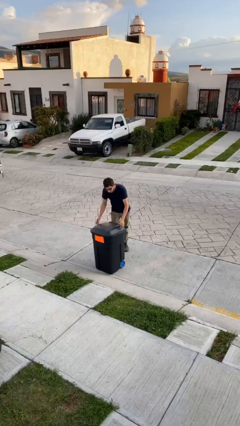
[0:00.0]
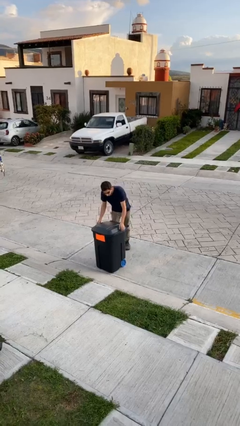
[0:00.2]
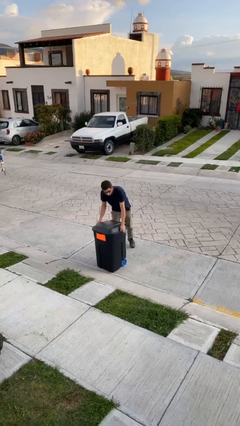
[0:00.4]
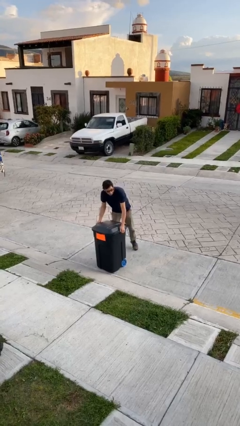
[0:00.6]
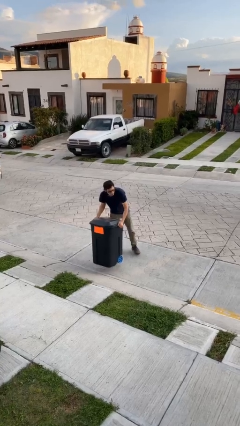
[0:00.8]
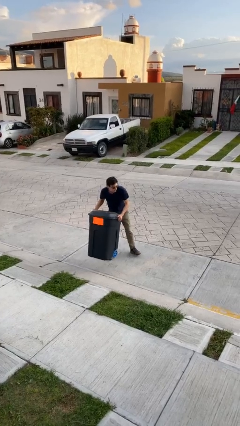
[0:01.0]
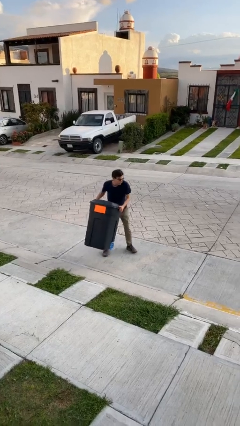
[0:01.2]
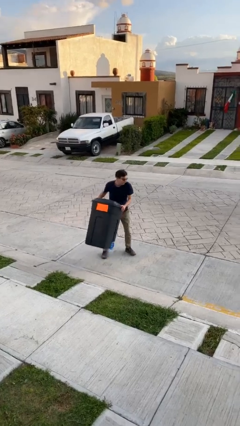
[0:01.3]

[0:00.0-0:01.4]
person picks up object from floor

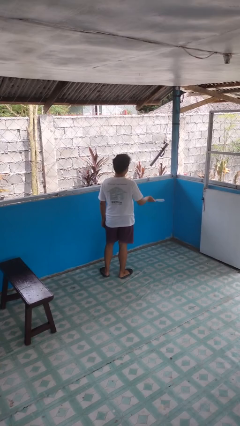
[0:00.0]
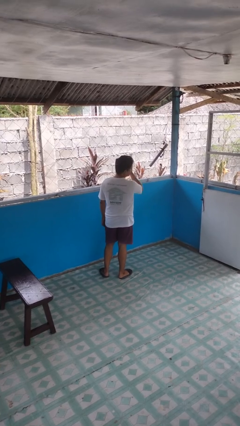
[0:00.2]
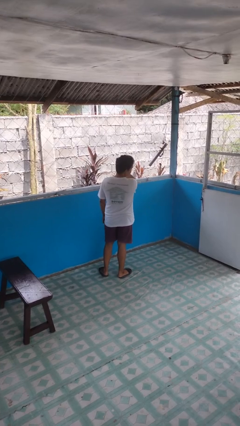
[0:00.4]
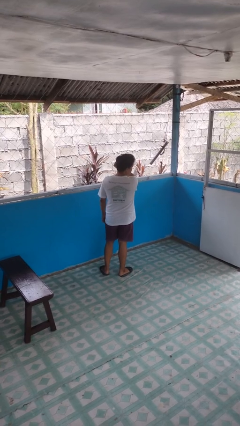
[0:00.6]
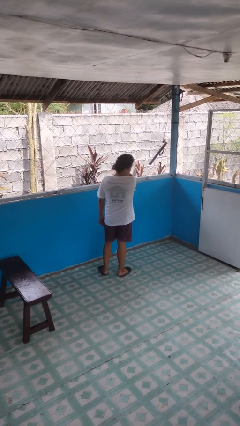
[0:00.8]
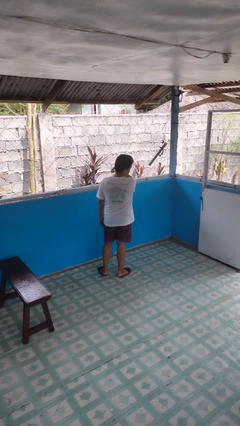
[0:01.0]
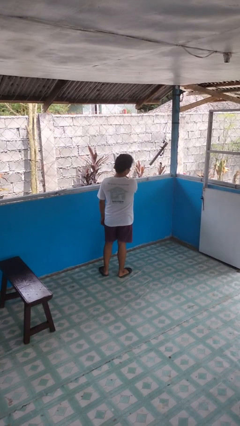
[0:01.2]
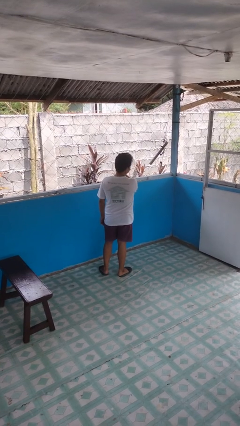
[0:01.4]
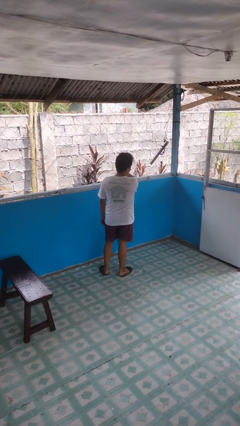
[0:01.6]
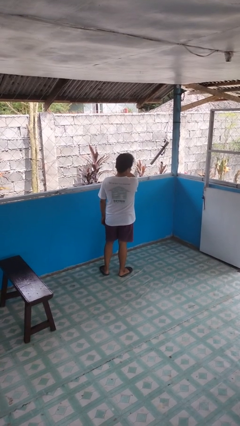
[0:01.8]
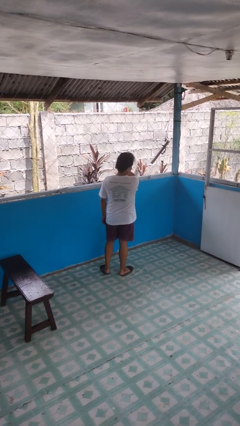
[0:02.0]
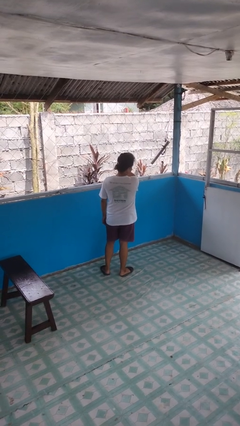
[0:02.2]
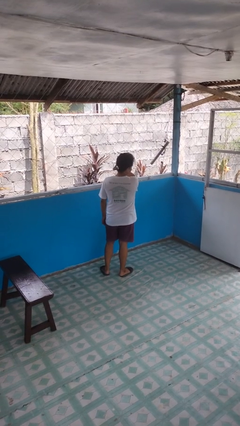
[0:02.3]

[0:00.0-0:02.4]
person brushes hair

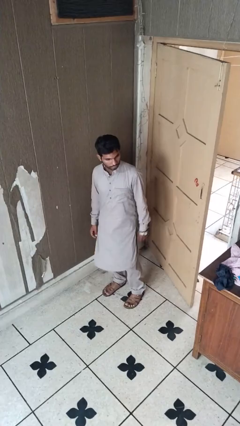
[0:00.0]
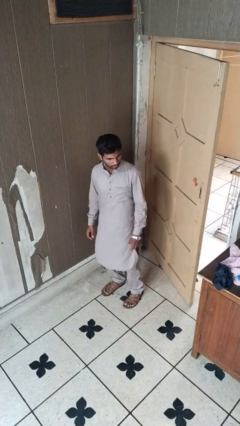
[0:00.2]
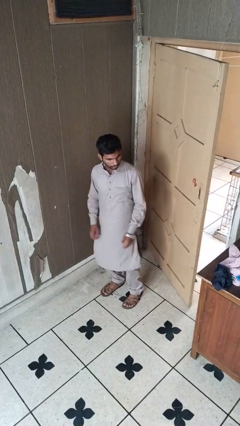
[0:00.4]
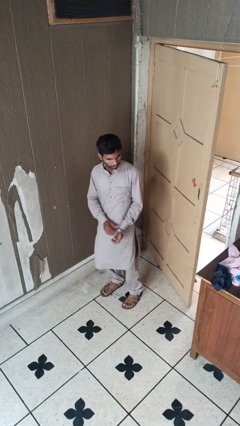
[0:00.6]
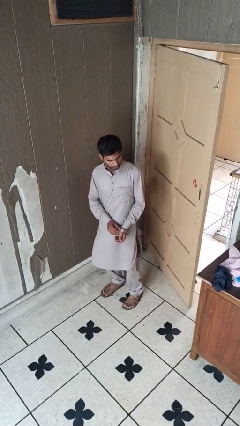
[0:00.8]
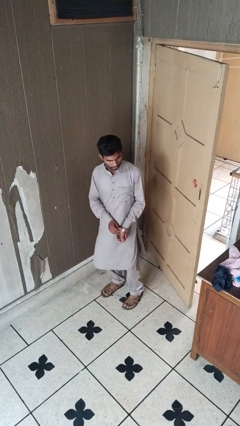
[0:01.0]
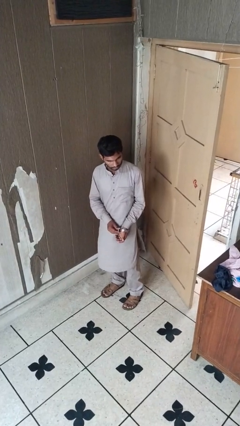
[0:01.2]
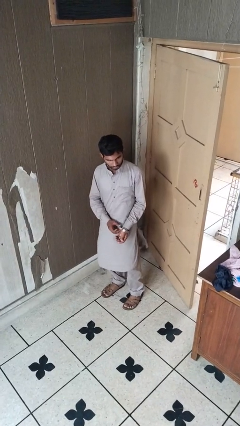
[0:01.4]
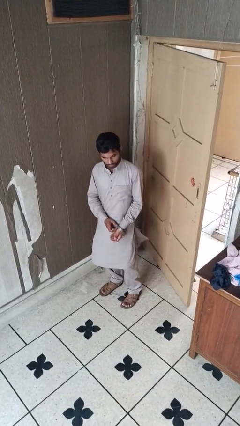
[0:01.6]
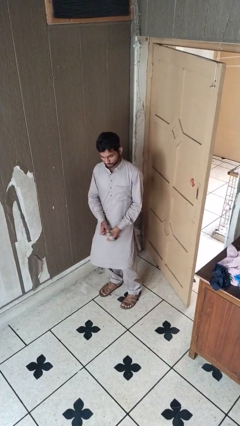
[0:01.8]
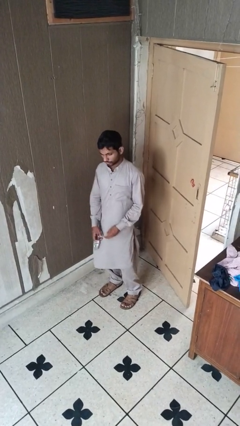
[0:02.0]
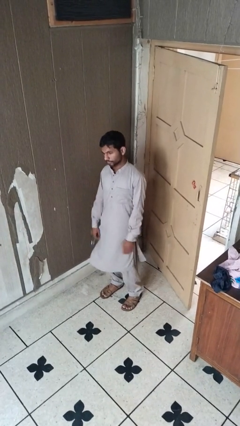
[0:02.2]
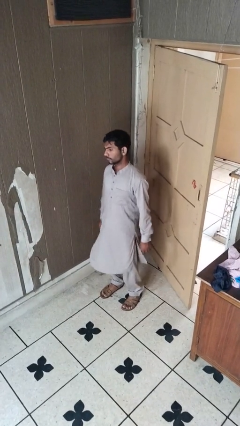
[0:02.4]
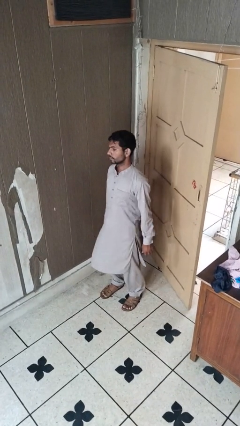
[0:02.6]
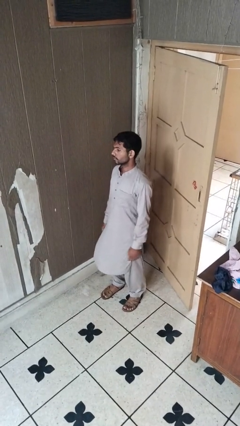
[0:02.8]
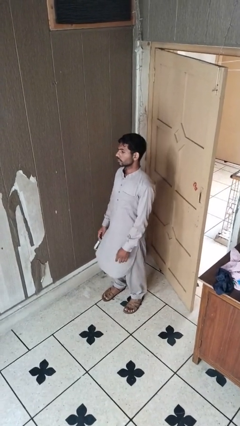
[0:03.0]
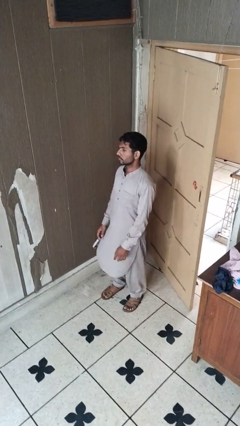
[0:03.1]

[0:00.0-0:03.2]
person takes off wristwatch

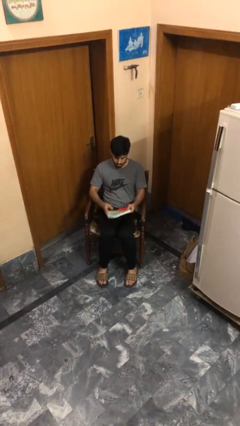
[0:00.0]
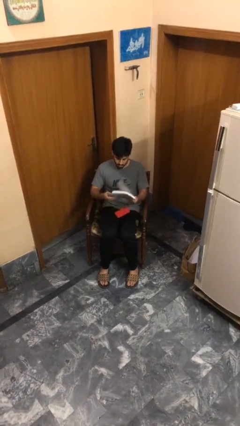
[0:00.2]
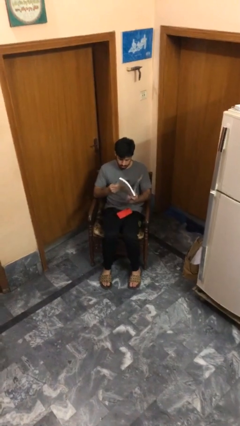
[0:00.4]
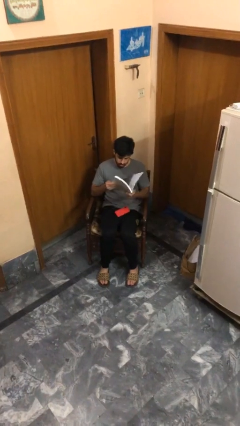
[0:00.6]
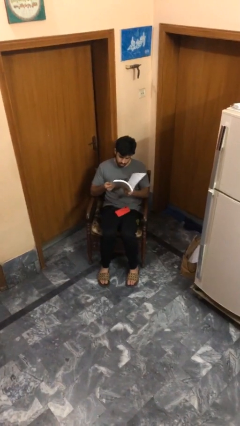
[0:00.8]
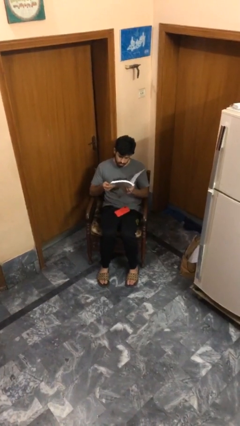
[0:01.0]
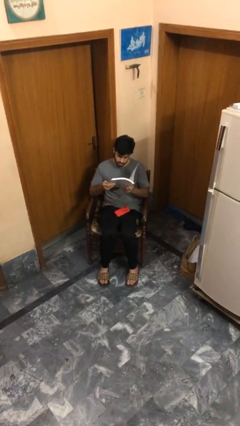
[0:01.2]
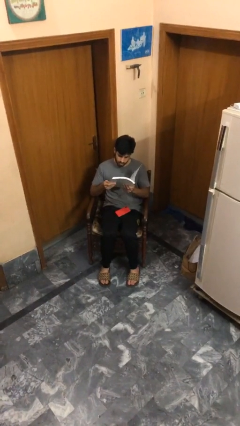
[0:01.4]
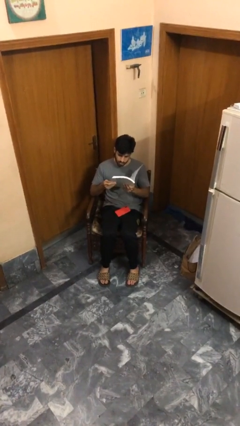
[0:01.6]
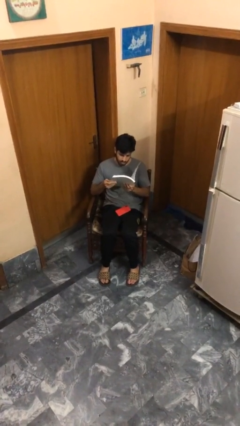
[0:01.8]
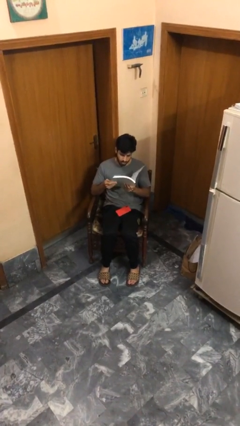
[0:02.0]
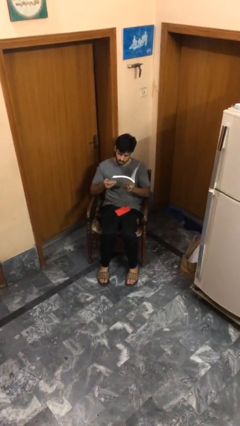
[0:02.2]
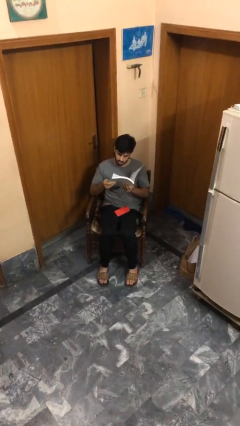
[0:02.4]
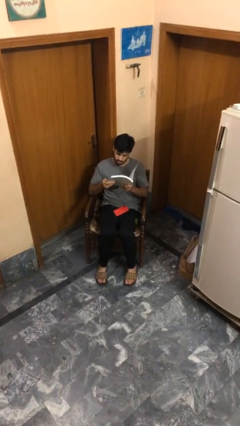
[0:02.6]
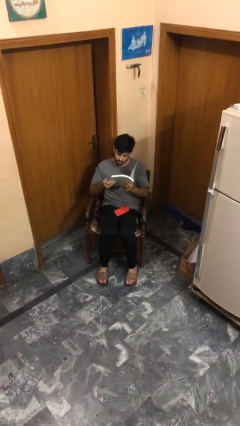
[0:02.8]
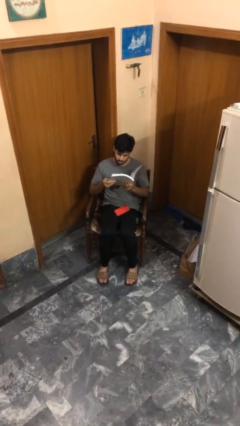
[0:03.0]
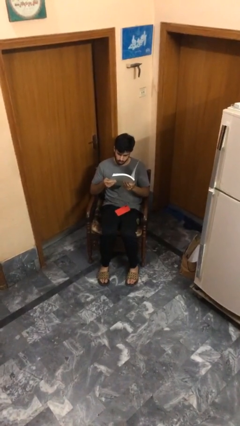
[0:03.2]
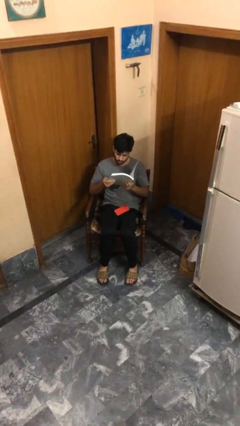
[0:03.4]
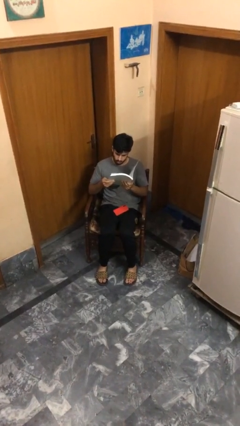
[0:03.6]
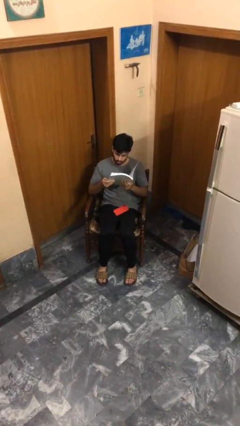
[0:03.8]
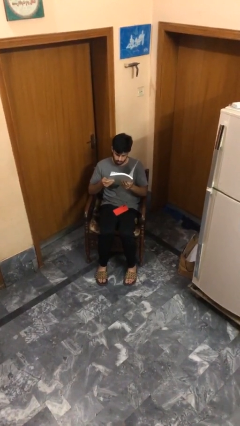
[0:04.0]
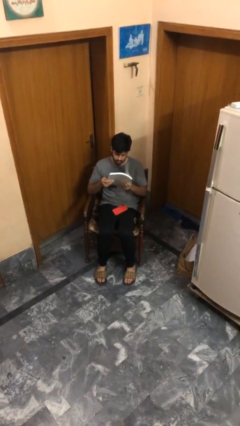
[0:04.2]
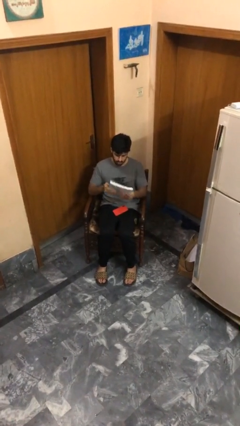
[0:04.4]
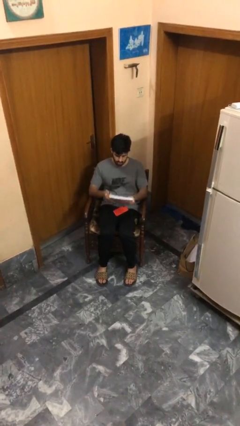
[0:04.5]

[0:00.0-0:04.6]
person reads book

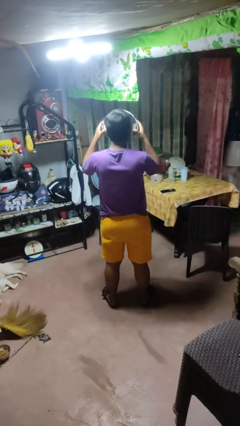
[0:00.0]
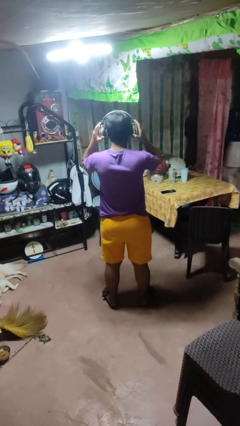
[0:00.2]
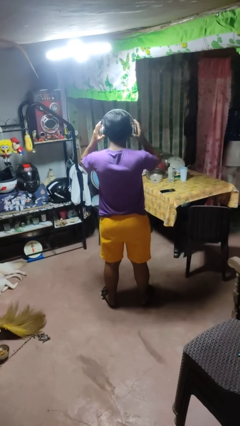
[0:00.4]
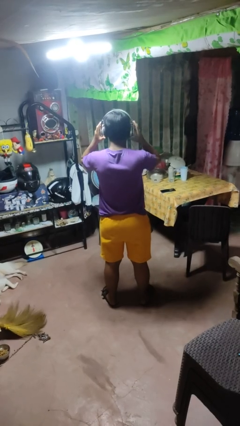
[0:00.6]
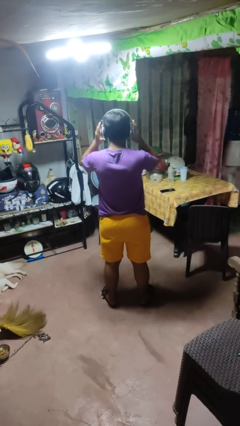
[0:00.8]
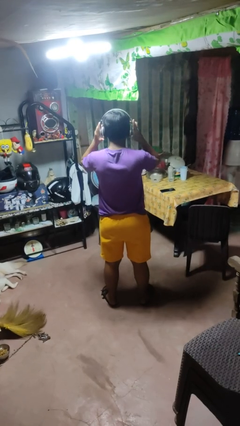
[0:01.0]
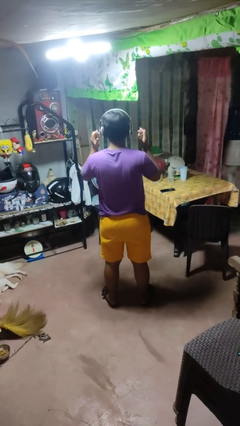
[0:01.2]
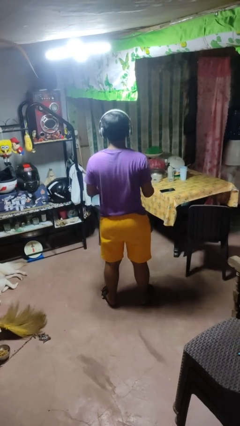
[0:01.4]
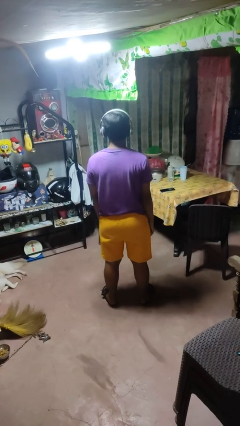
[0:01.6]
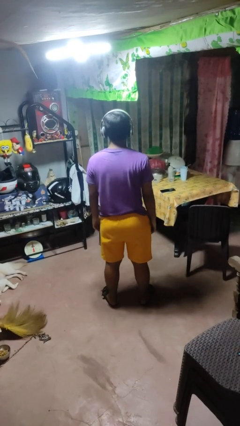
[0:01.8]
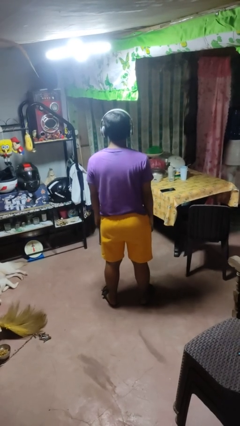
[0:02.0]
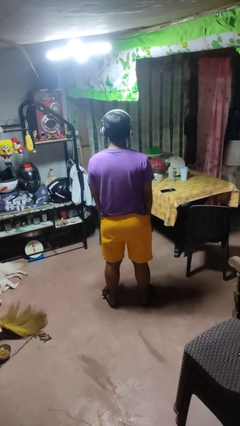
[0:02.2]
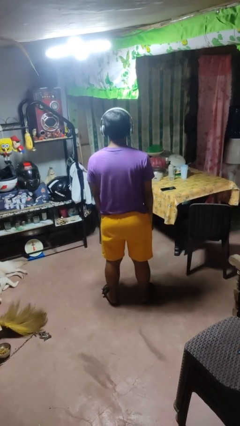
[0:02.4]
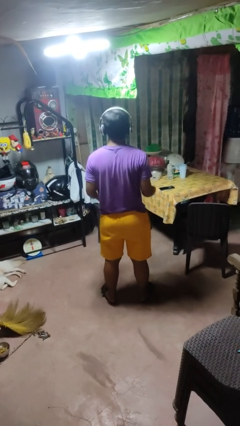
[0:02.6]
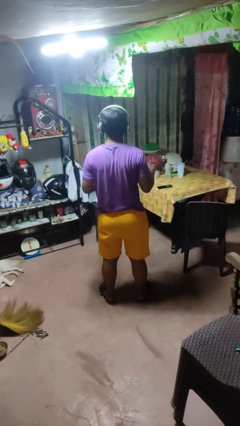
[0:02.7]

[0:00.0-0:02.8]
person puts on headphones

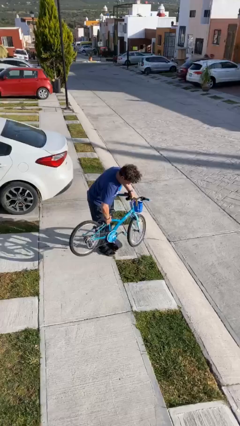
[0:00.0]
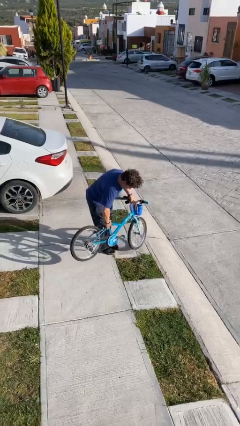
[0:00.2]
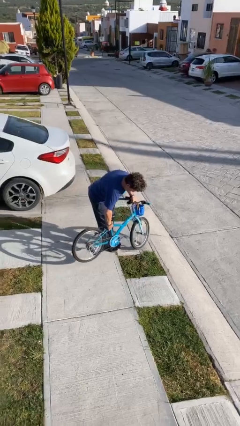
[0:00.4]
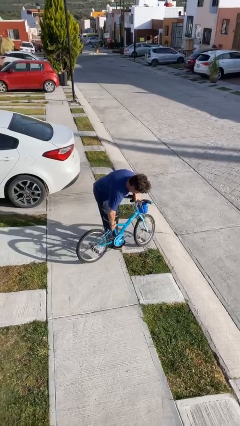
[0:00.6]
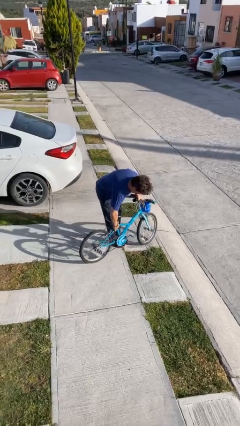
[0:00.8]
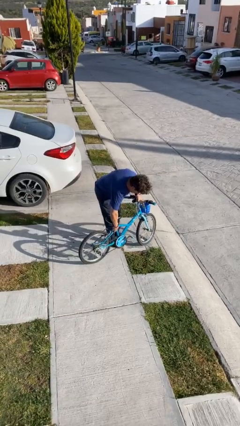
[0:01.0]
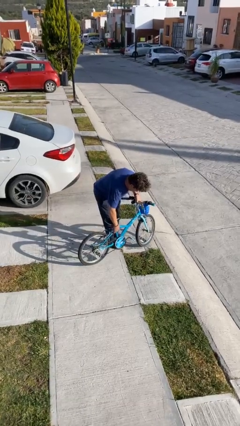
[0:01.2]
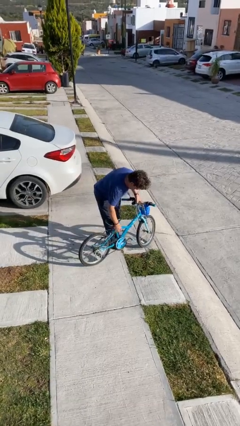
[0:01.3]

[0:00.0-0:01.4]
person puts down object on floor

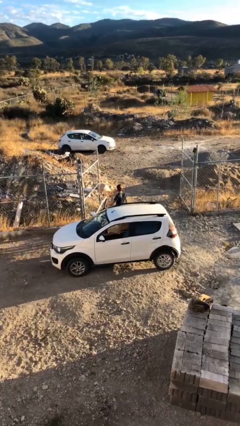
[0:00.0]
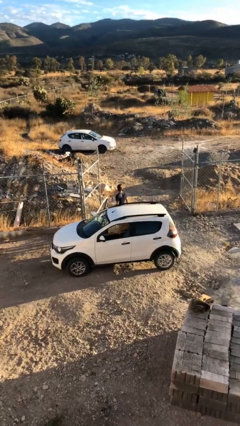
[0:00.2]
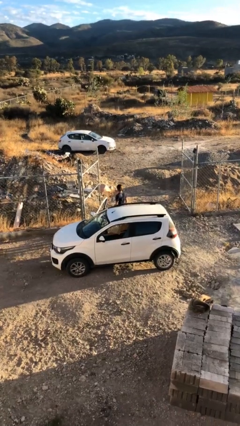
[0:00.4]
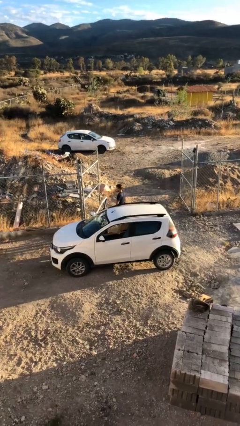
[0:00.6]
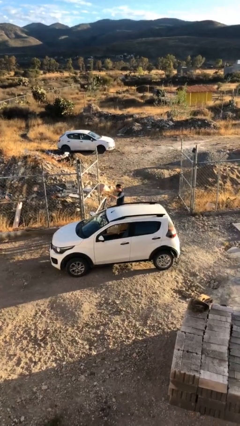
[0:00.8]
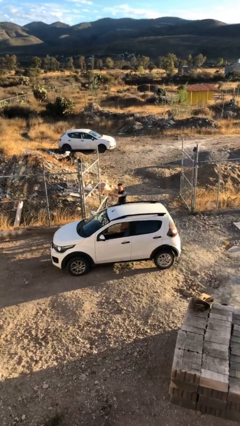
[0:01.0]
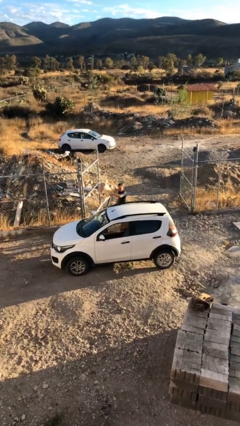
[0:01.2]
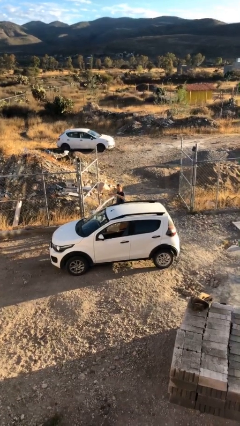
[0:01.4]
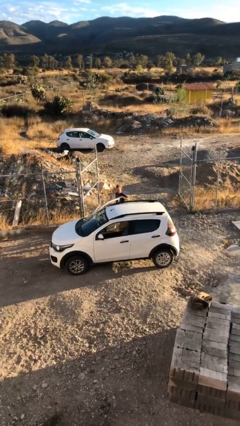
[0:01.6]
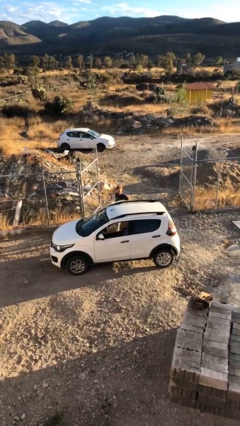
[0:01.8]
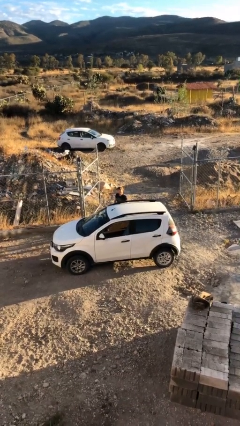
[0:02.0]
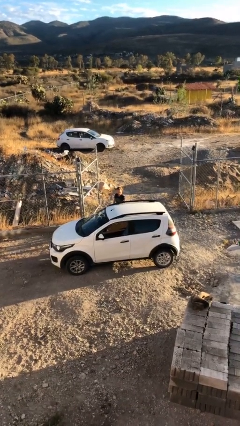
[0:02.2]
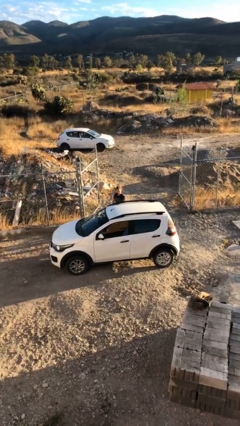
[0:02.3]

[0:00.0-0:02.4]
person closes car door
